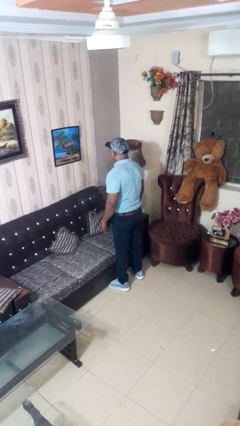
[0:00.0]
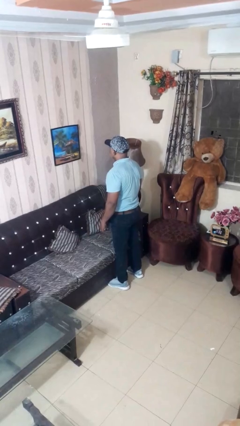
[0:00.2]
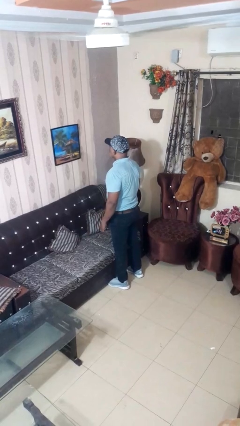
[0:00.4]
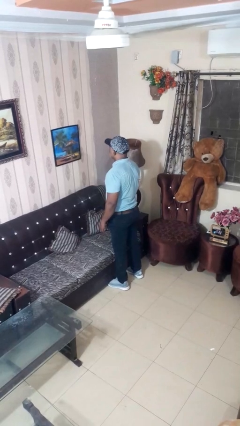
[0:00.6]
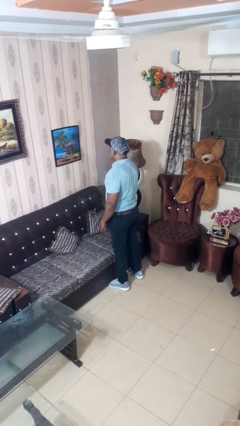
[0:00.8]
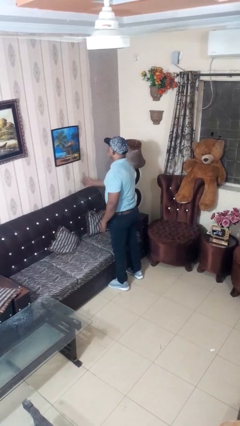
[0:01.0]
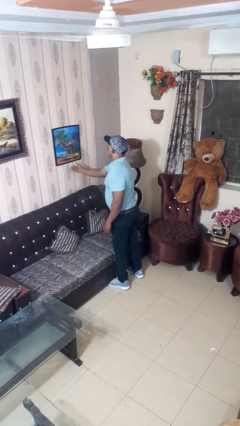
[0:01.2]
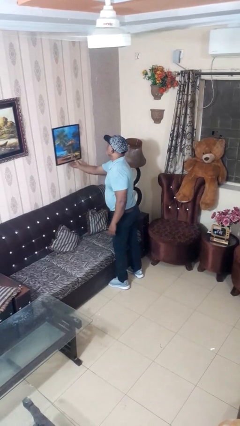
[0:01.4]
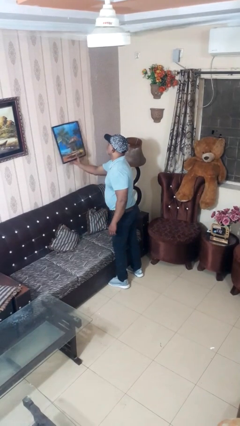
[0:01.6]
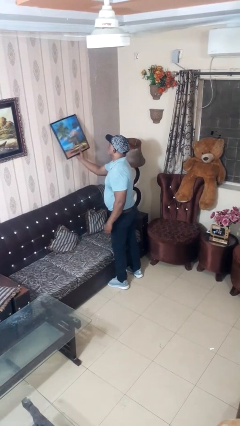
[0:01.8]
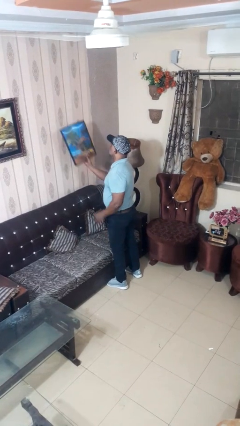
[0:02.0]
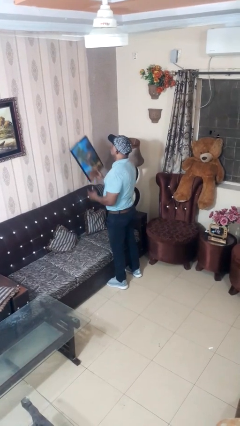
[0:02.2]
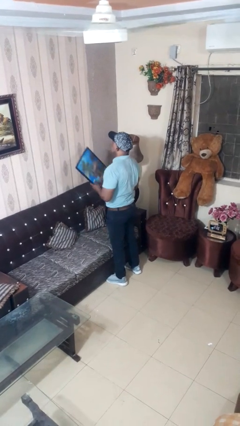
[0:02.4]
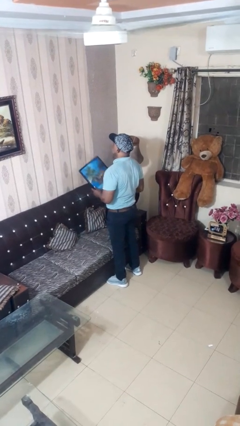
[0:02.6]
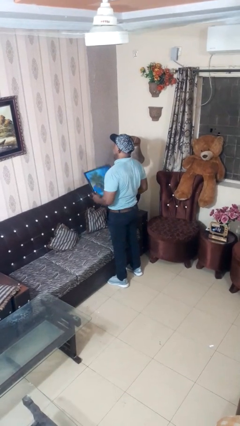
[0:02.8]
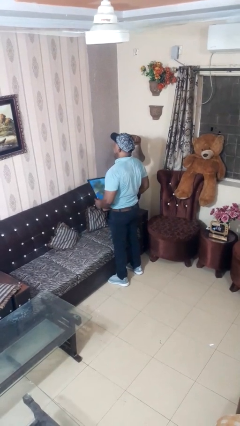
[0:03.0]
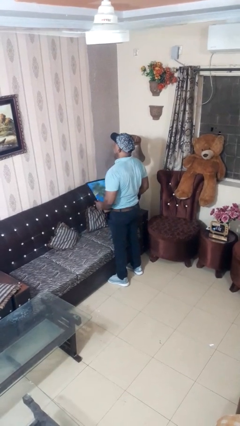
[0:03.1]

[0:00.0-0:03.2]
person takes down picture frame

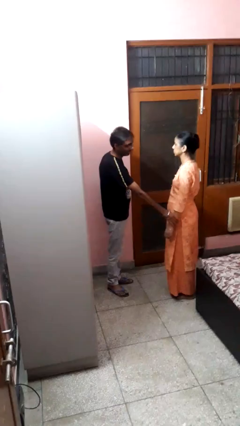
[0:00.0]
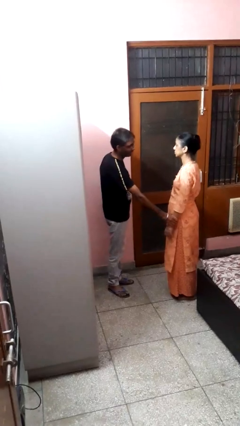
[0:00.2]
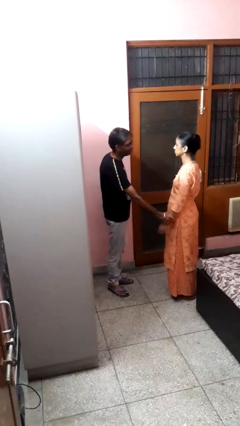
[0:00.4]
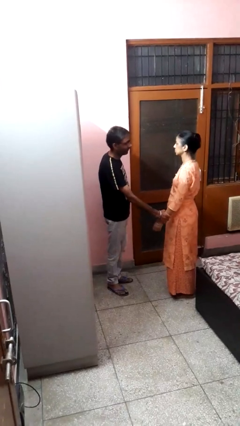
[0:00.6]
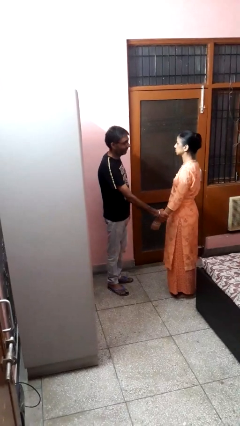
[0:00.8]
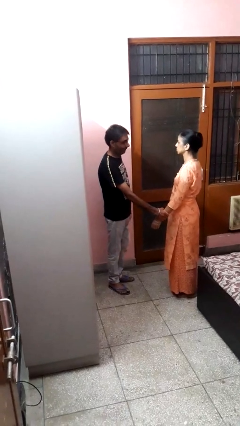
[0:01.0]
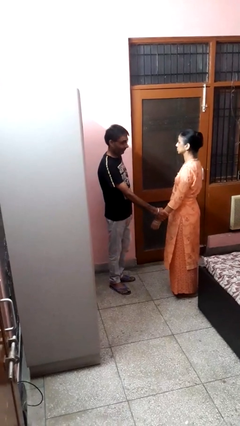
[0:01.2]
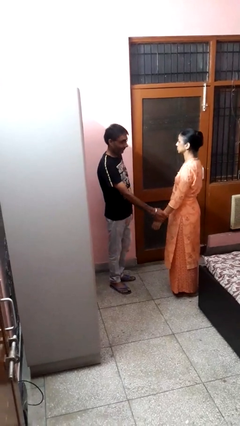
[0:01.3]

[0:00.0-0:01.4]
person grabs person by forearm

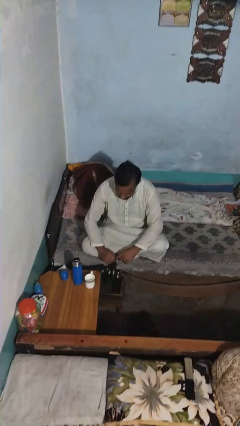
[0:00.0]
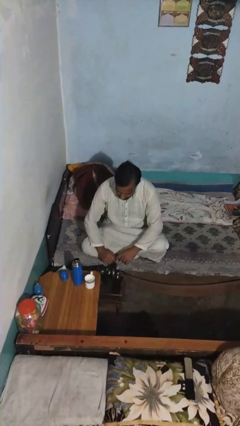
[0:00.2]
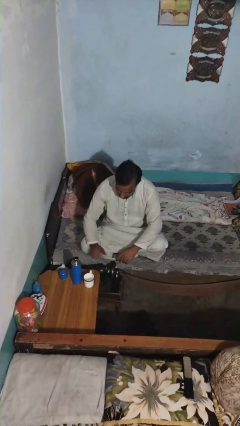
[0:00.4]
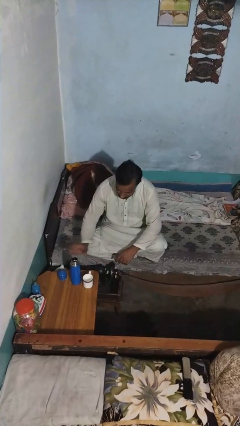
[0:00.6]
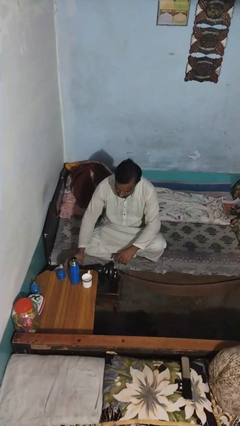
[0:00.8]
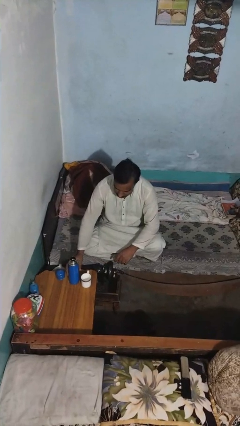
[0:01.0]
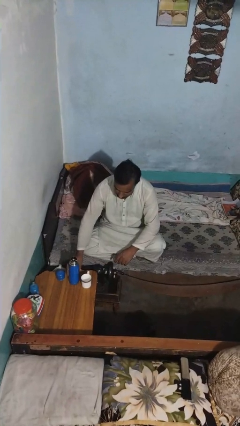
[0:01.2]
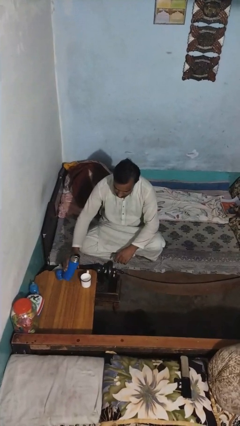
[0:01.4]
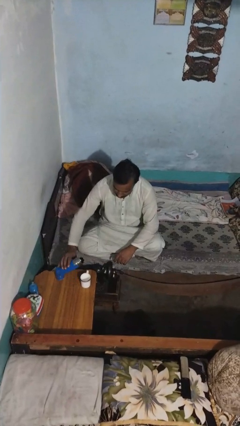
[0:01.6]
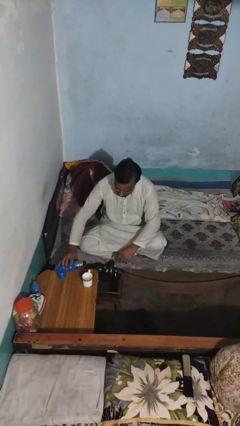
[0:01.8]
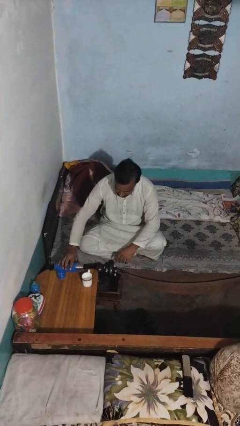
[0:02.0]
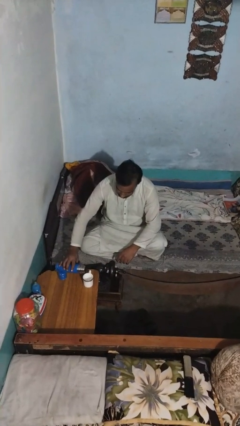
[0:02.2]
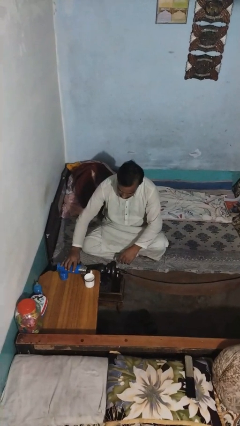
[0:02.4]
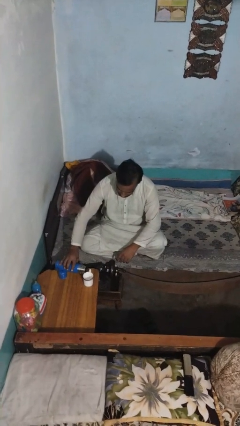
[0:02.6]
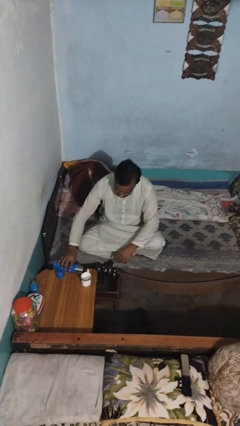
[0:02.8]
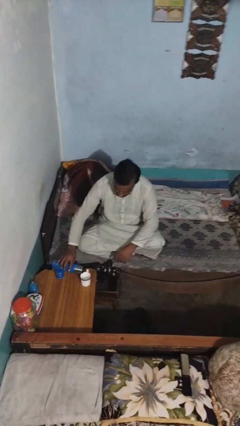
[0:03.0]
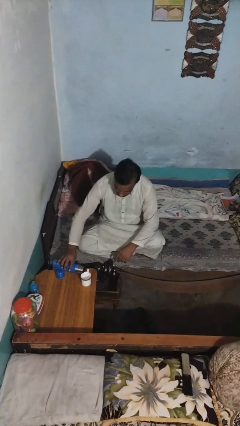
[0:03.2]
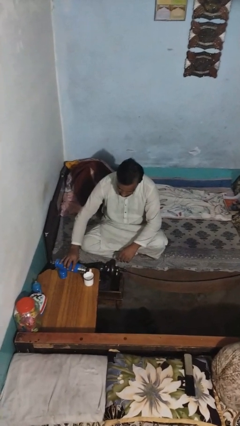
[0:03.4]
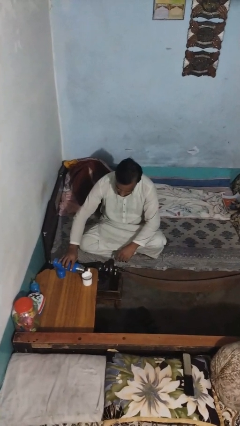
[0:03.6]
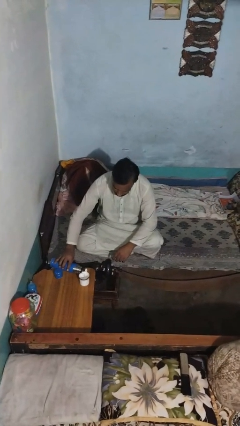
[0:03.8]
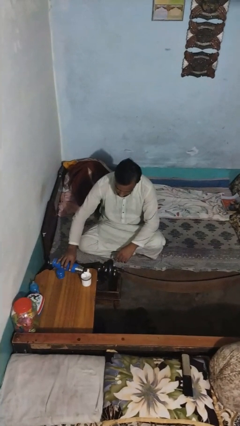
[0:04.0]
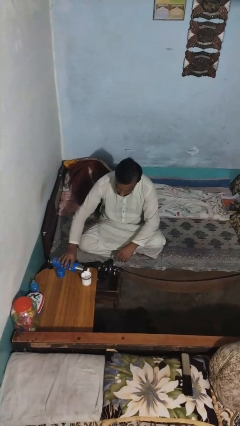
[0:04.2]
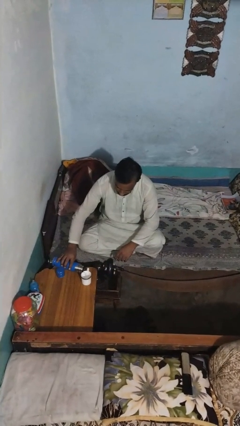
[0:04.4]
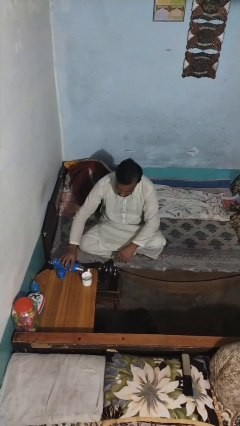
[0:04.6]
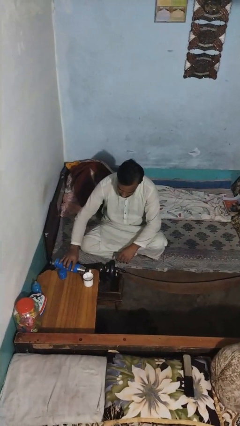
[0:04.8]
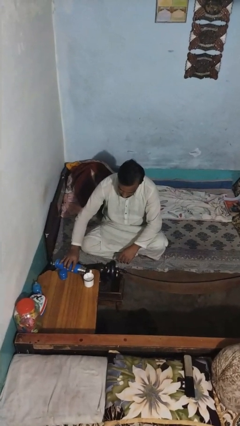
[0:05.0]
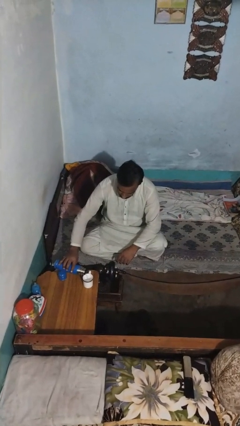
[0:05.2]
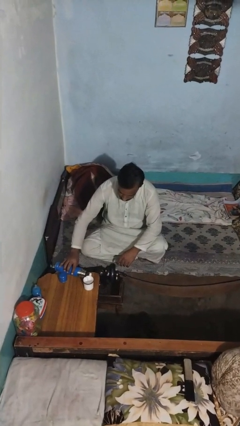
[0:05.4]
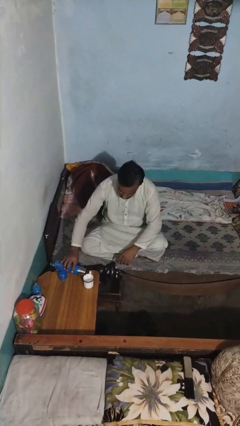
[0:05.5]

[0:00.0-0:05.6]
person pours liquid into cup

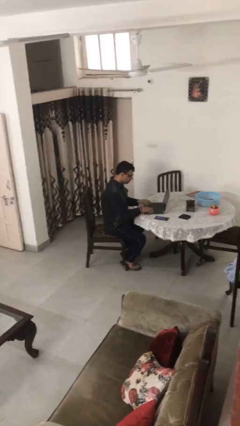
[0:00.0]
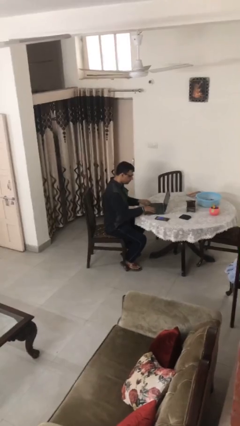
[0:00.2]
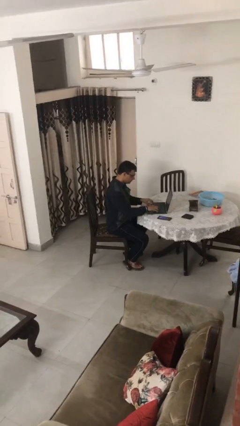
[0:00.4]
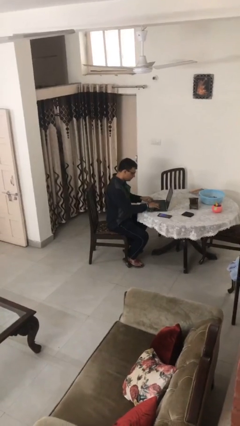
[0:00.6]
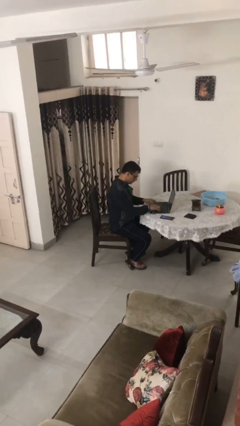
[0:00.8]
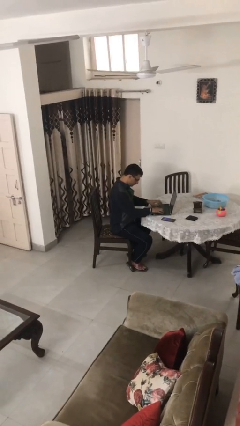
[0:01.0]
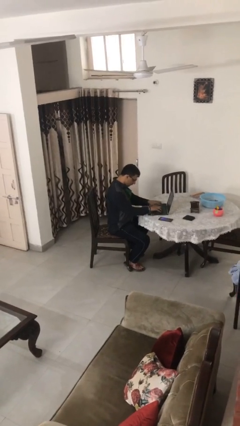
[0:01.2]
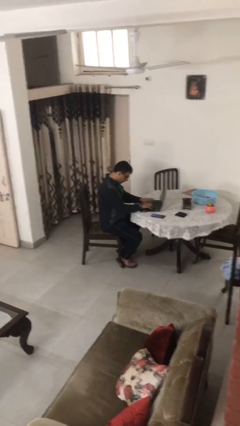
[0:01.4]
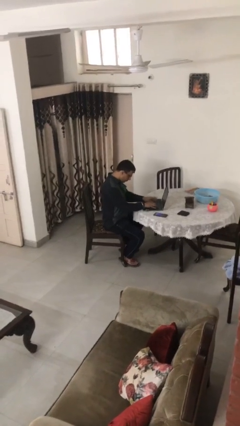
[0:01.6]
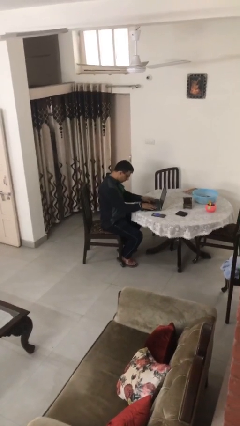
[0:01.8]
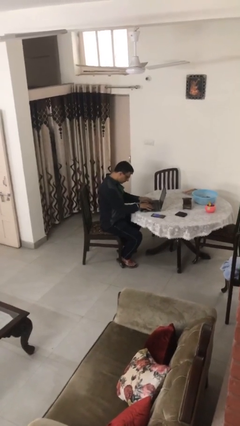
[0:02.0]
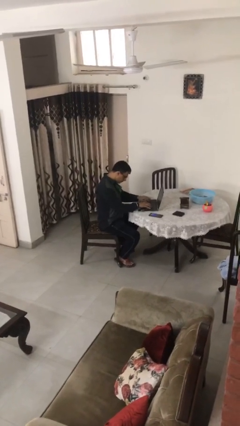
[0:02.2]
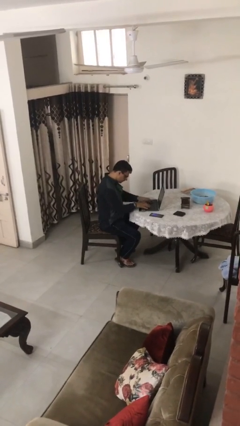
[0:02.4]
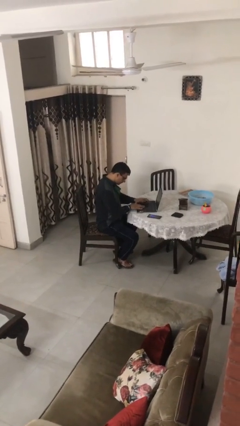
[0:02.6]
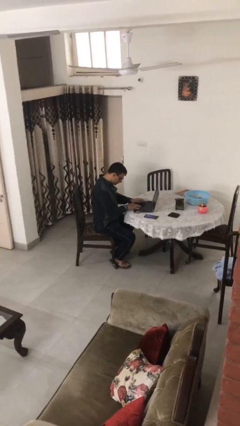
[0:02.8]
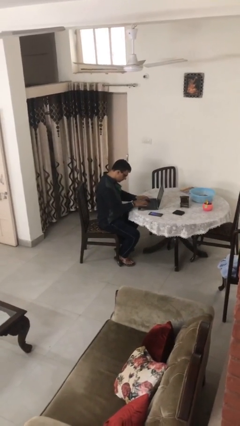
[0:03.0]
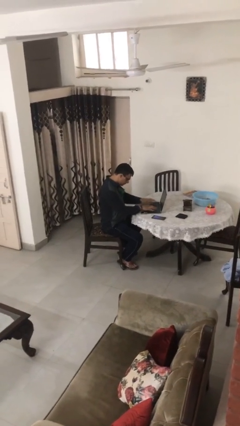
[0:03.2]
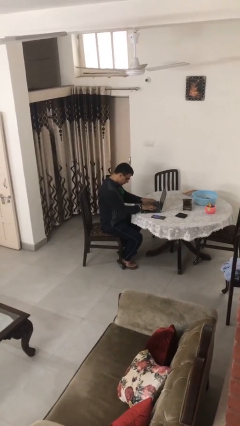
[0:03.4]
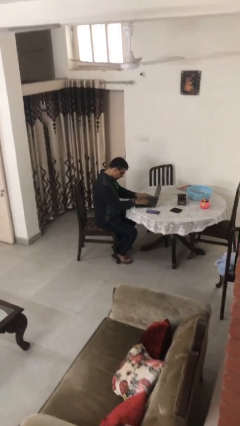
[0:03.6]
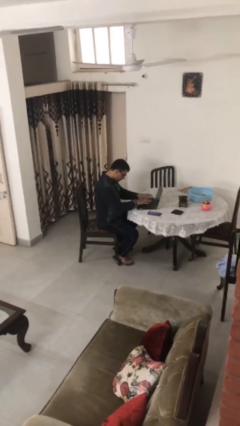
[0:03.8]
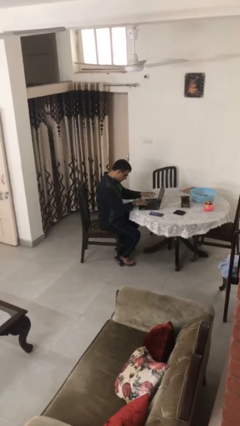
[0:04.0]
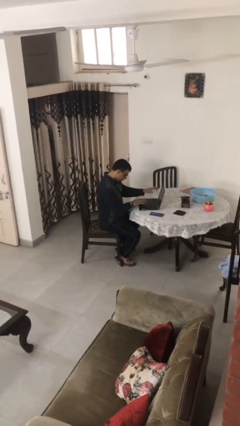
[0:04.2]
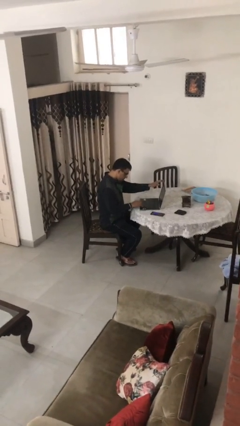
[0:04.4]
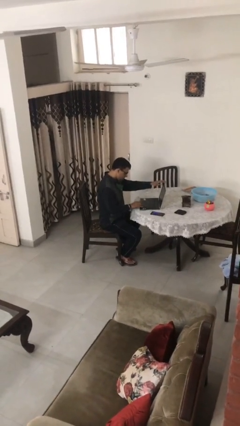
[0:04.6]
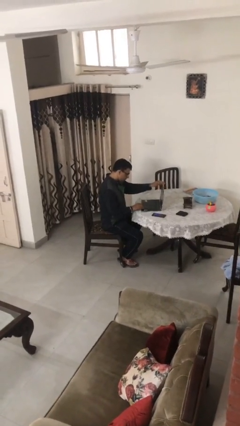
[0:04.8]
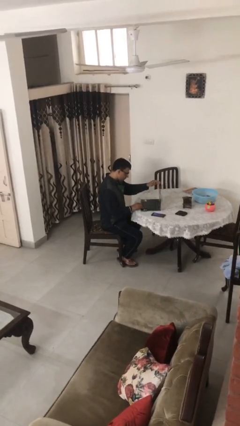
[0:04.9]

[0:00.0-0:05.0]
person interacts with laptop

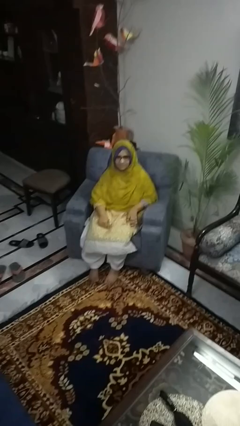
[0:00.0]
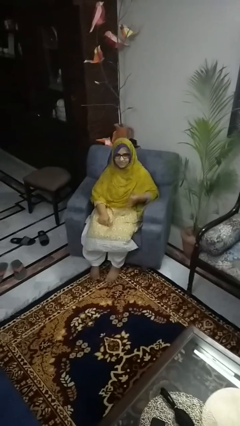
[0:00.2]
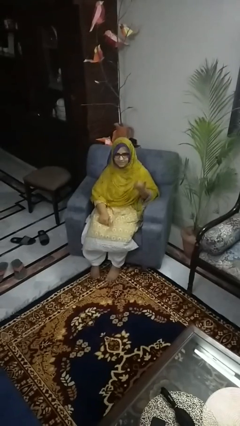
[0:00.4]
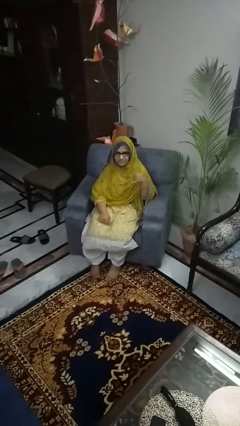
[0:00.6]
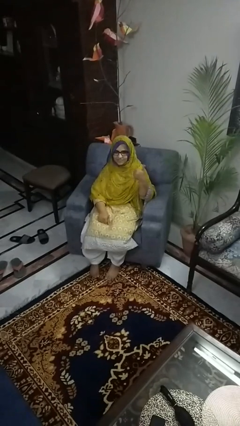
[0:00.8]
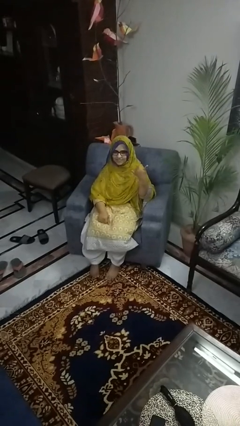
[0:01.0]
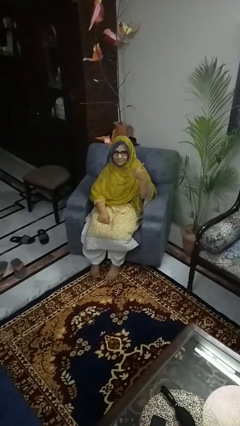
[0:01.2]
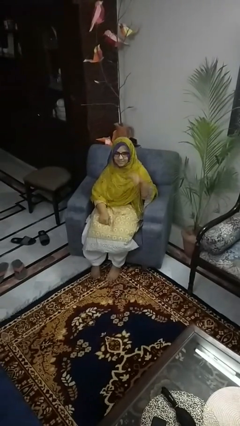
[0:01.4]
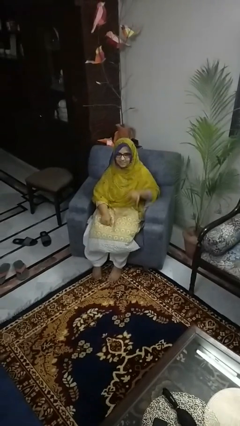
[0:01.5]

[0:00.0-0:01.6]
person gestures hang loose

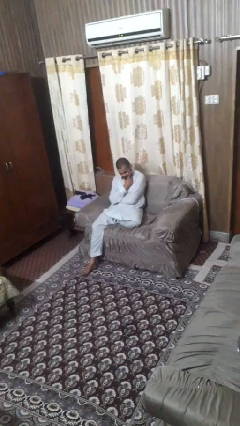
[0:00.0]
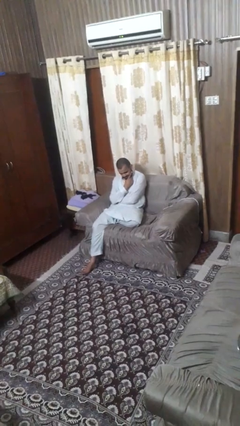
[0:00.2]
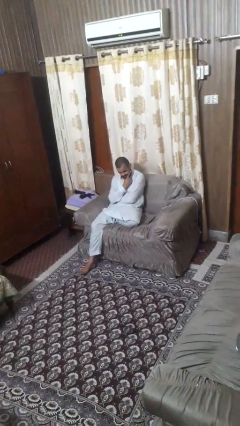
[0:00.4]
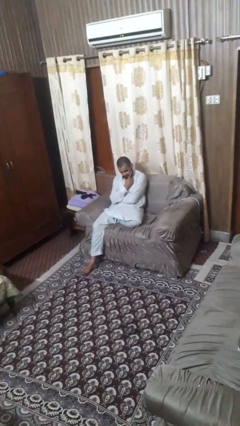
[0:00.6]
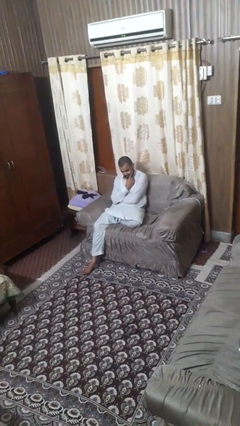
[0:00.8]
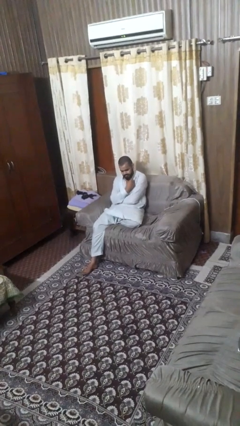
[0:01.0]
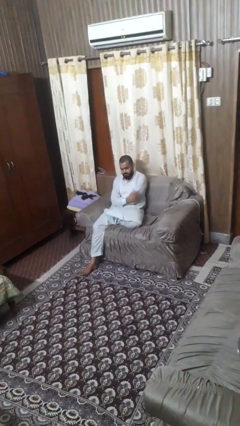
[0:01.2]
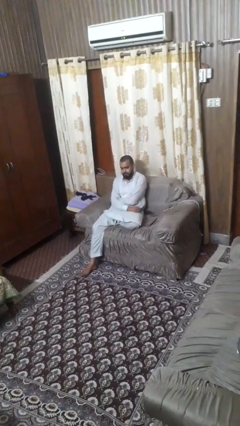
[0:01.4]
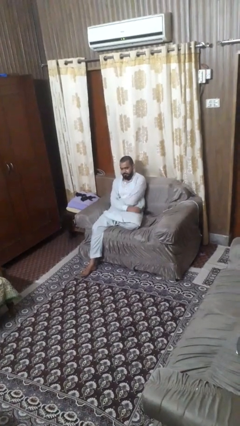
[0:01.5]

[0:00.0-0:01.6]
person strokes chin
